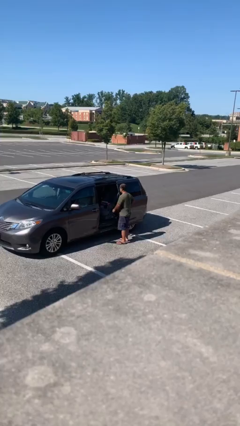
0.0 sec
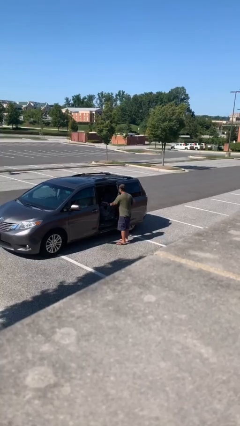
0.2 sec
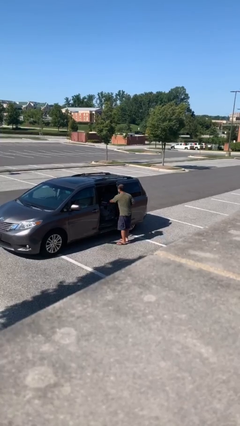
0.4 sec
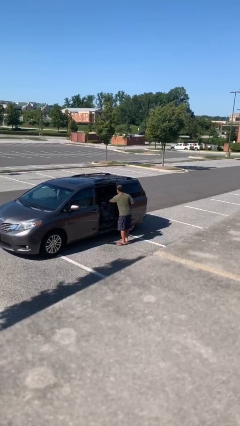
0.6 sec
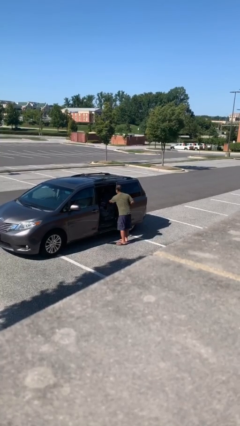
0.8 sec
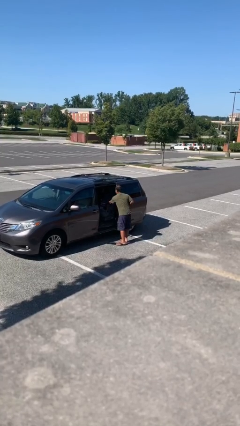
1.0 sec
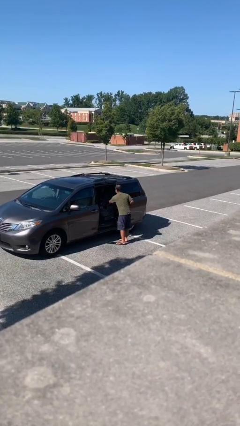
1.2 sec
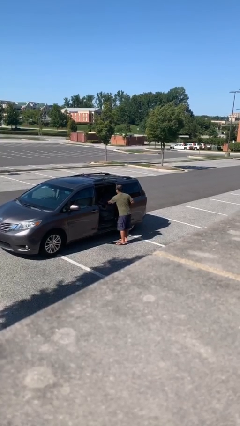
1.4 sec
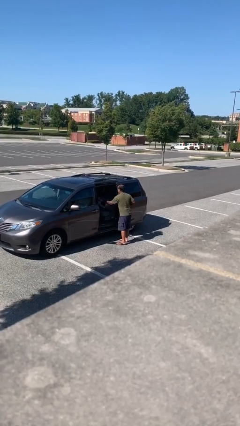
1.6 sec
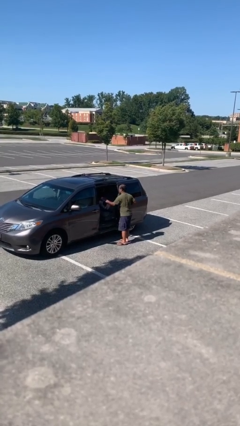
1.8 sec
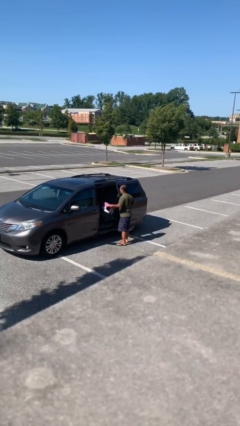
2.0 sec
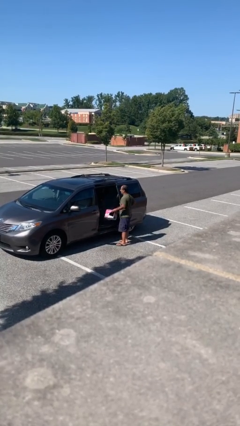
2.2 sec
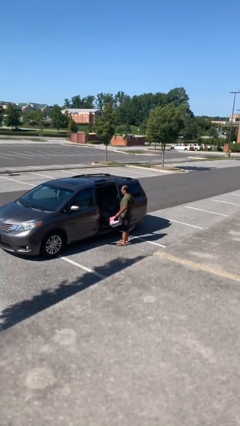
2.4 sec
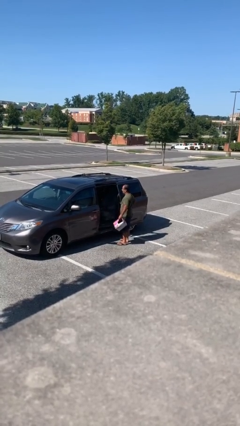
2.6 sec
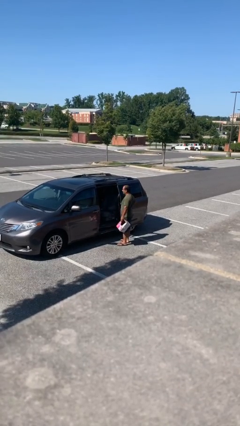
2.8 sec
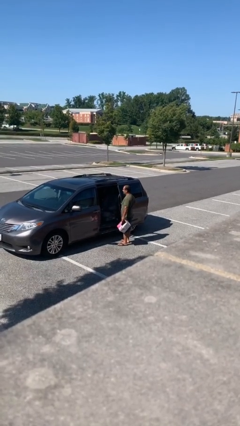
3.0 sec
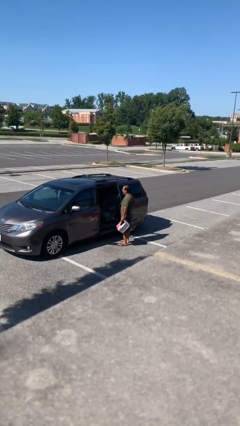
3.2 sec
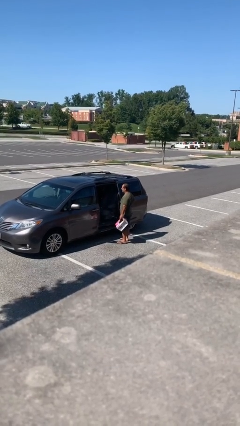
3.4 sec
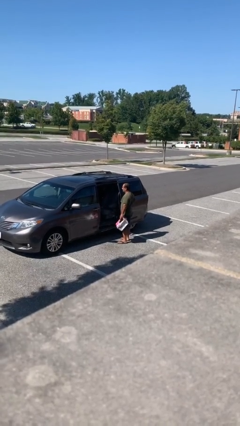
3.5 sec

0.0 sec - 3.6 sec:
person unloads car

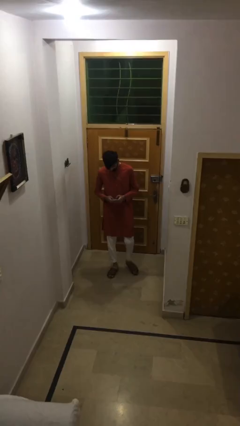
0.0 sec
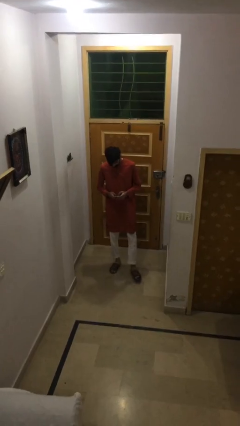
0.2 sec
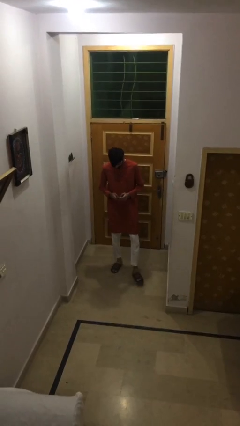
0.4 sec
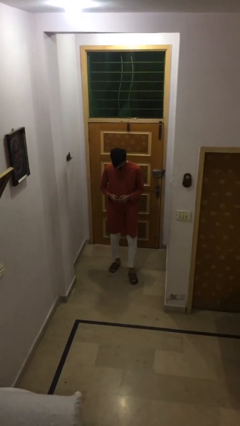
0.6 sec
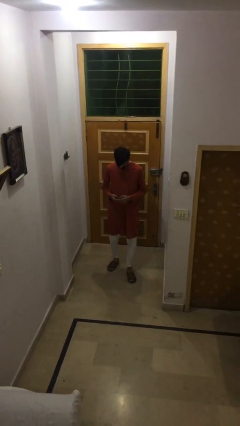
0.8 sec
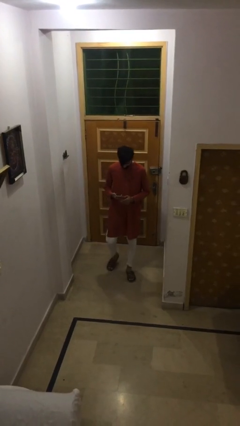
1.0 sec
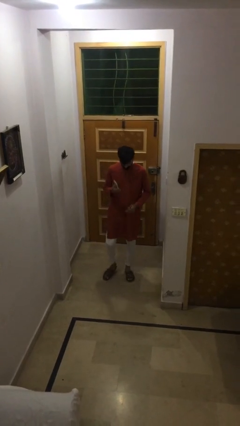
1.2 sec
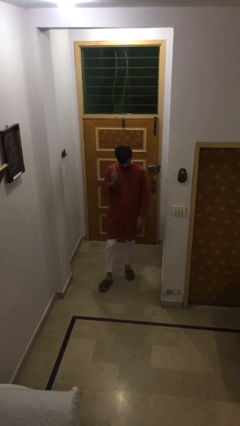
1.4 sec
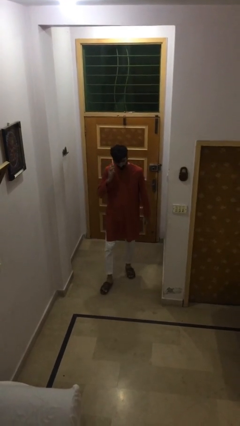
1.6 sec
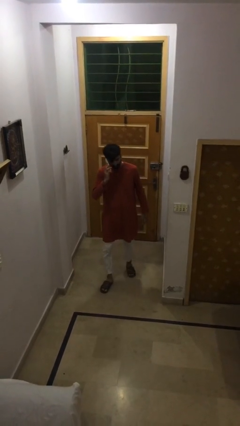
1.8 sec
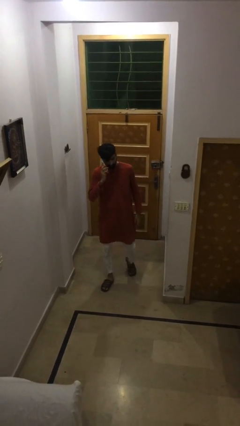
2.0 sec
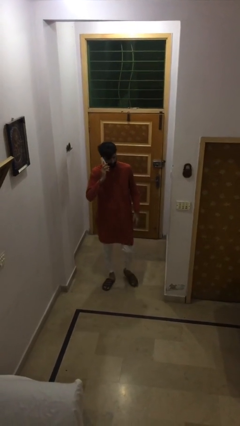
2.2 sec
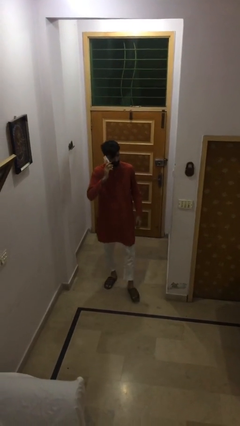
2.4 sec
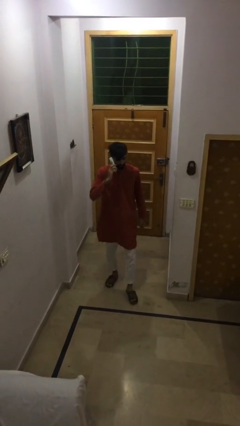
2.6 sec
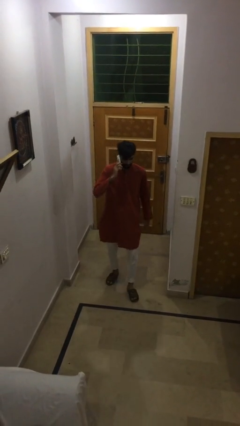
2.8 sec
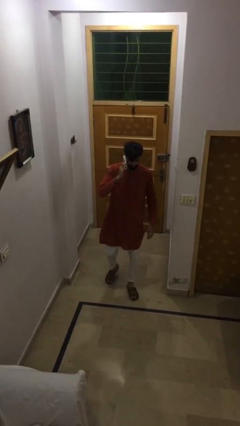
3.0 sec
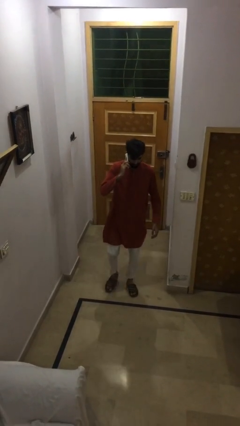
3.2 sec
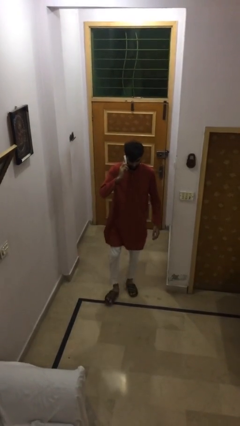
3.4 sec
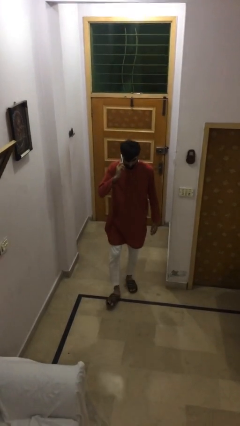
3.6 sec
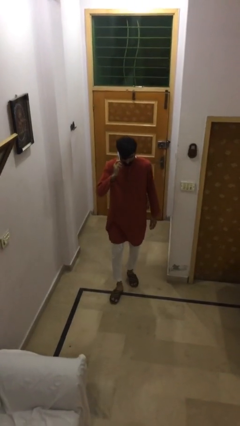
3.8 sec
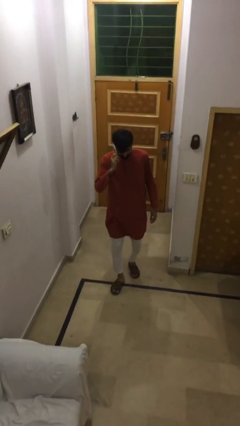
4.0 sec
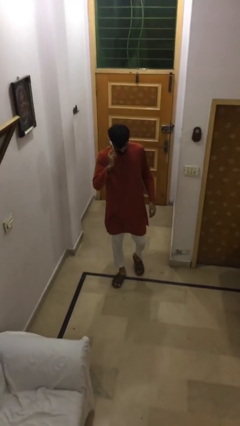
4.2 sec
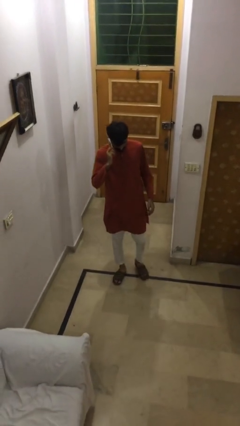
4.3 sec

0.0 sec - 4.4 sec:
person talks on phone

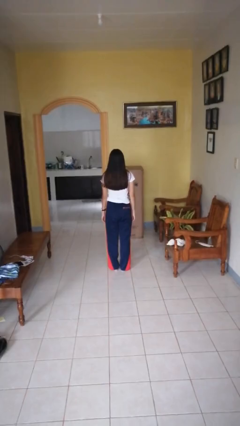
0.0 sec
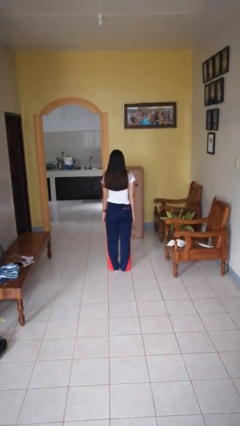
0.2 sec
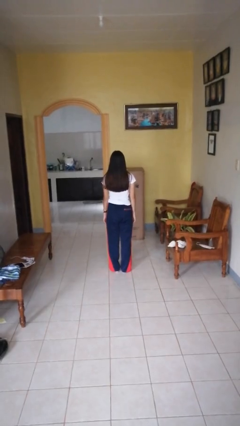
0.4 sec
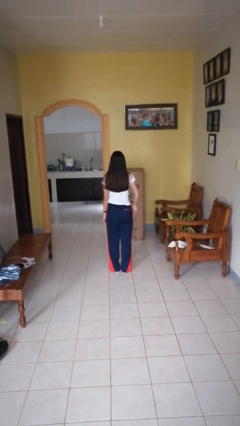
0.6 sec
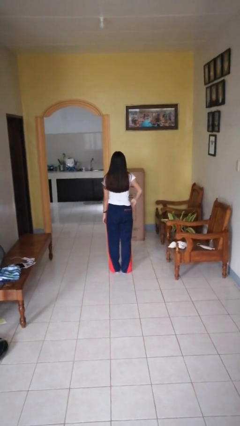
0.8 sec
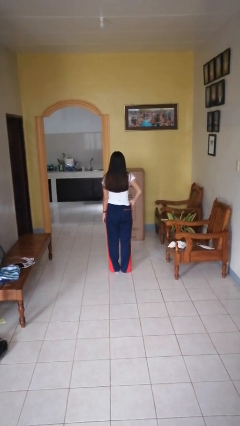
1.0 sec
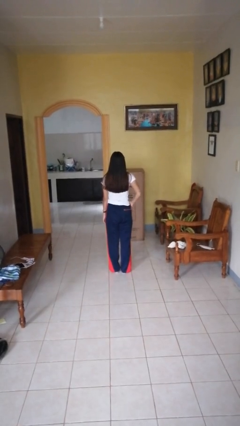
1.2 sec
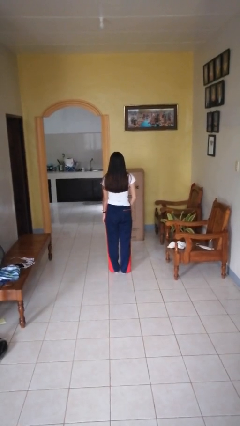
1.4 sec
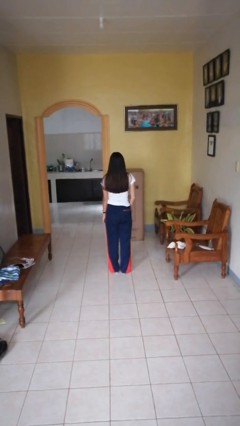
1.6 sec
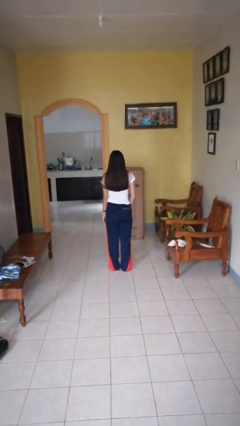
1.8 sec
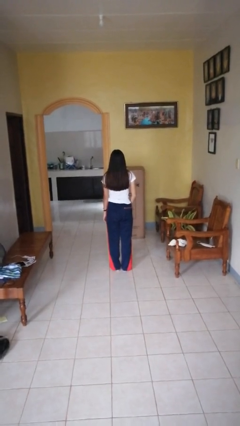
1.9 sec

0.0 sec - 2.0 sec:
person puts hands in back pockets

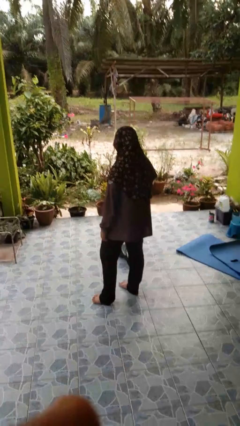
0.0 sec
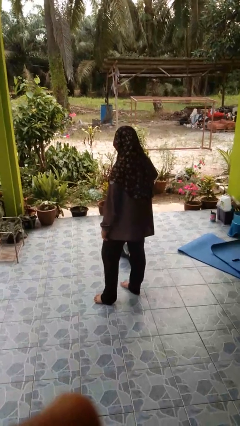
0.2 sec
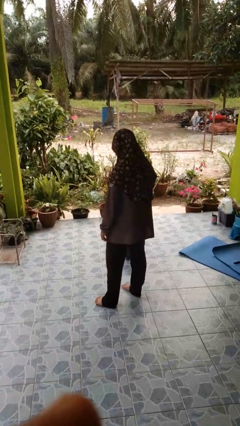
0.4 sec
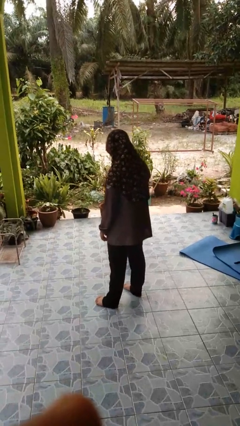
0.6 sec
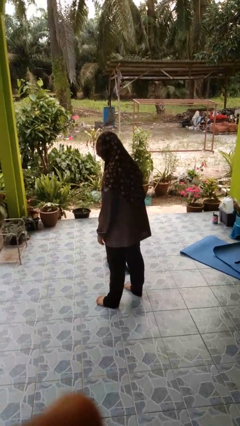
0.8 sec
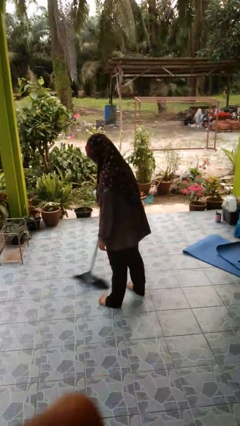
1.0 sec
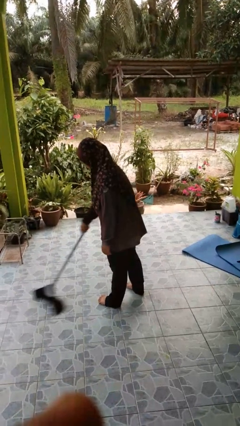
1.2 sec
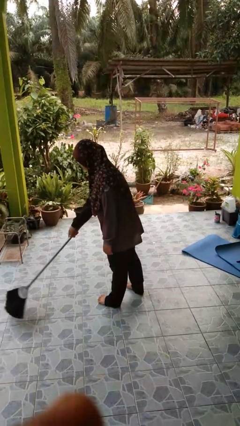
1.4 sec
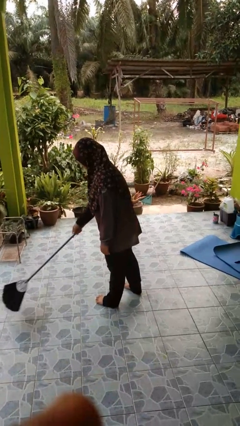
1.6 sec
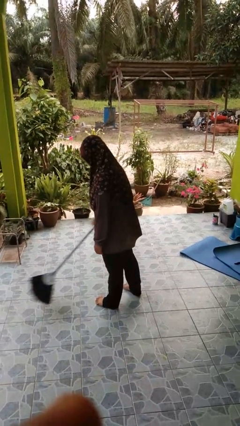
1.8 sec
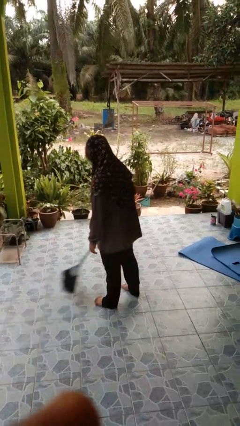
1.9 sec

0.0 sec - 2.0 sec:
person sweeps floor

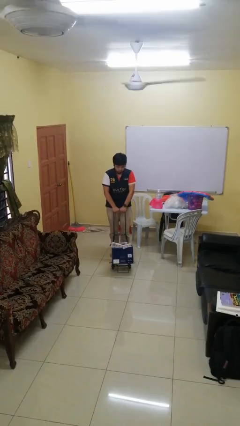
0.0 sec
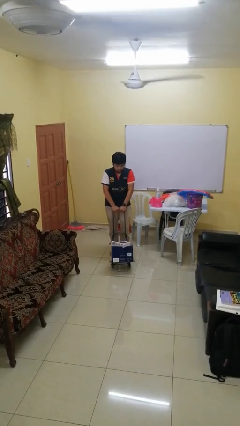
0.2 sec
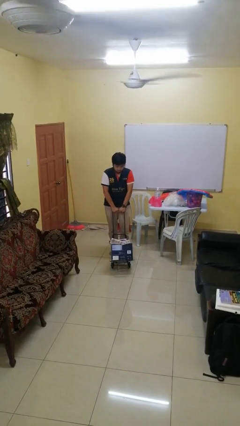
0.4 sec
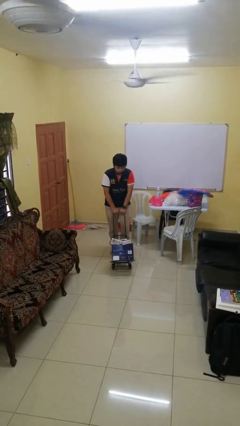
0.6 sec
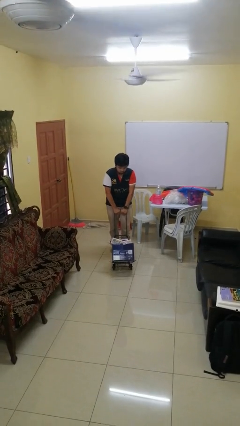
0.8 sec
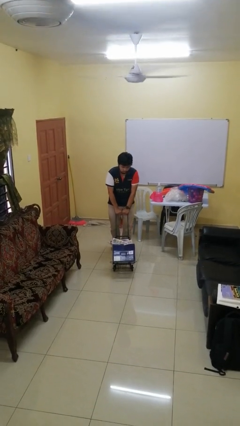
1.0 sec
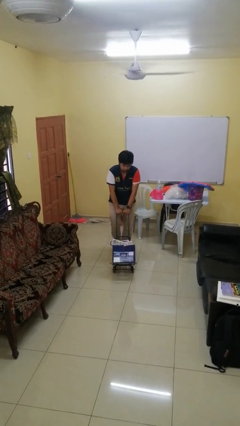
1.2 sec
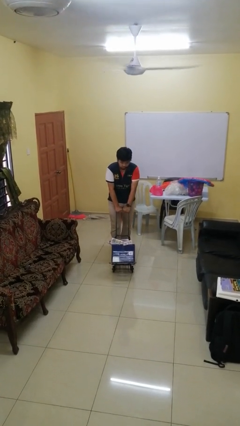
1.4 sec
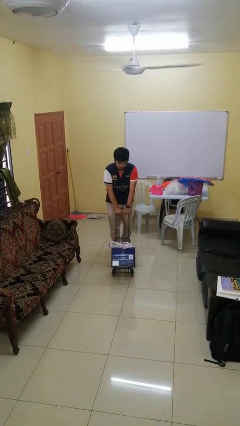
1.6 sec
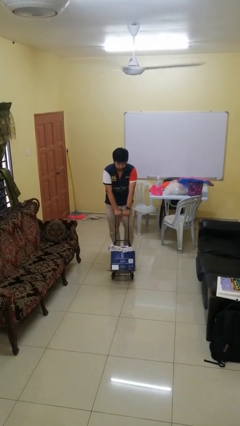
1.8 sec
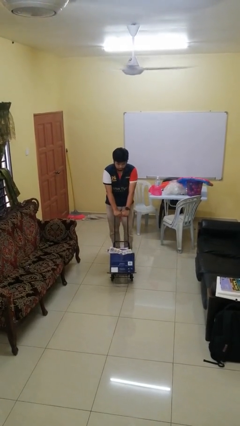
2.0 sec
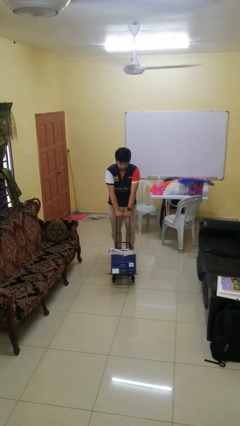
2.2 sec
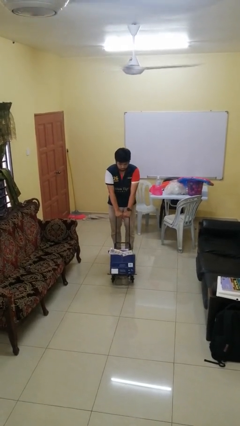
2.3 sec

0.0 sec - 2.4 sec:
person pushes wheeled cart

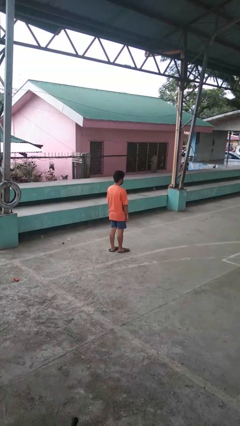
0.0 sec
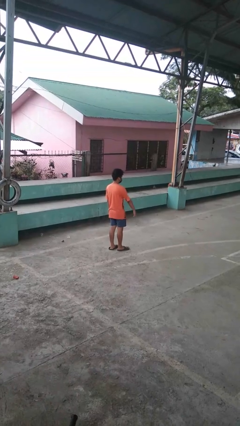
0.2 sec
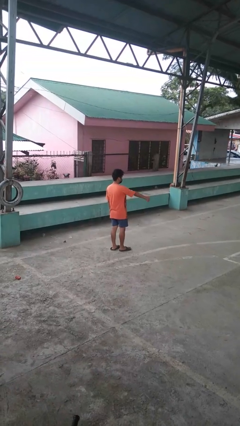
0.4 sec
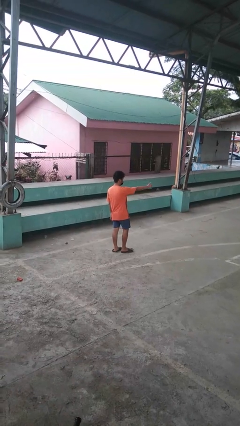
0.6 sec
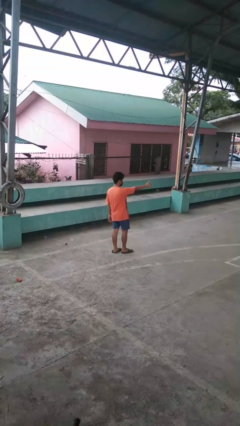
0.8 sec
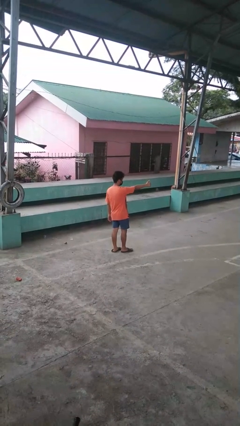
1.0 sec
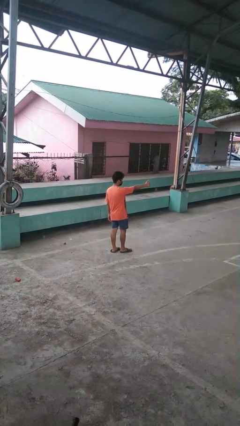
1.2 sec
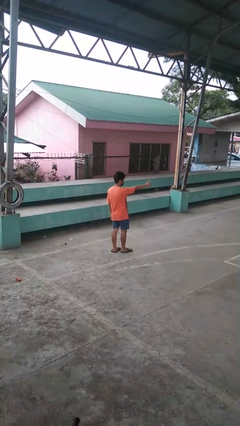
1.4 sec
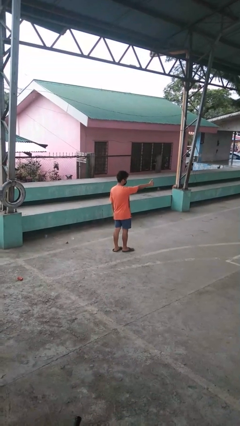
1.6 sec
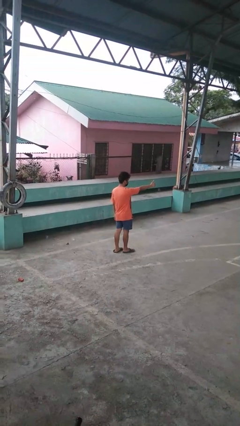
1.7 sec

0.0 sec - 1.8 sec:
person gestures thumbs up

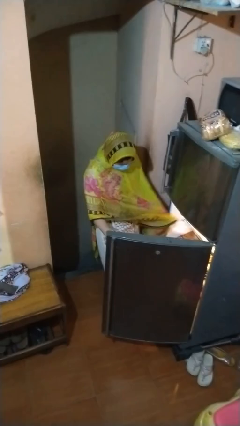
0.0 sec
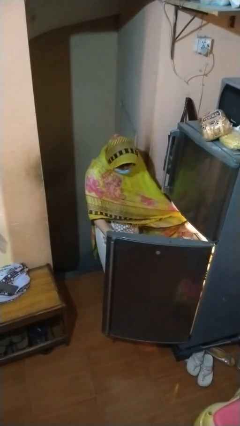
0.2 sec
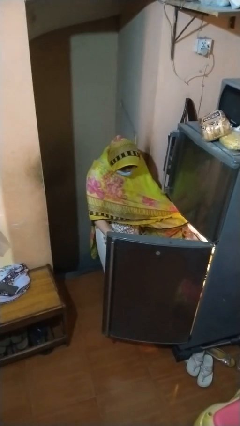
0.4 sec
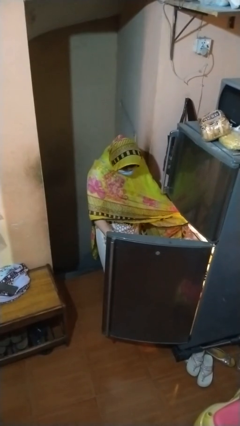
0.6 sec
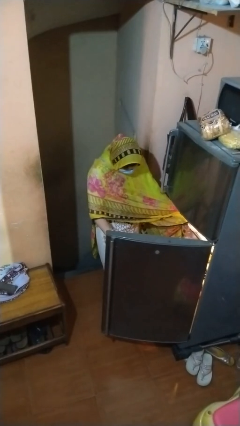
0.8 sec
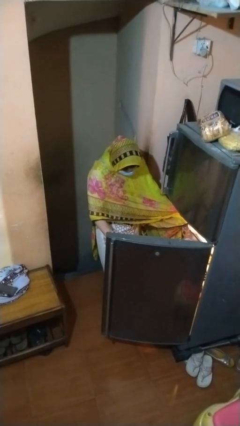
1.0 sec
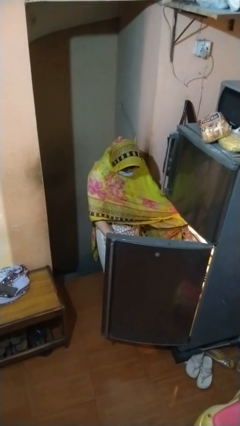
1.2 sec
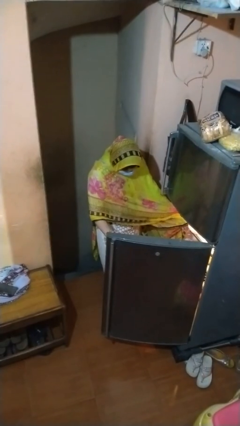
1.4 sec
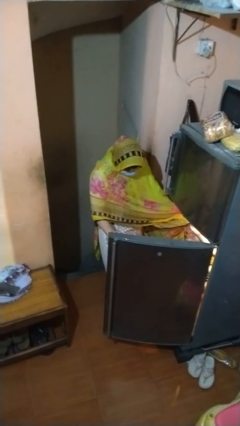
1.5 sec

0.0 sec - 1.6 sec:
person puts object into refrigerator
